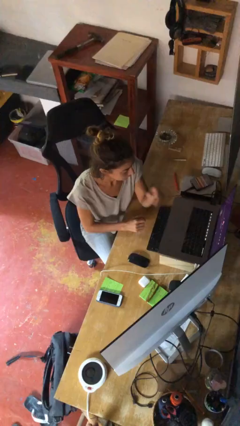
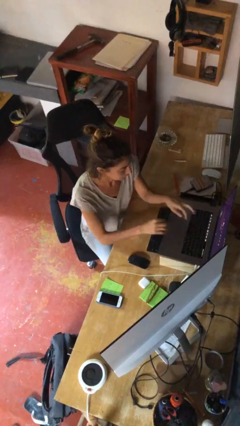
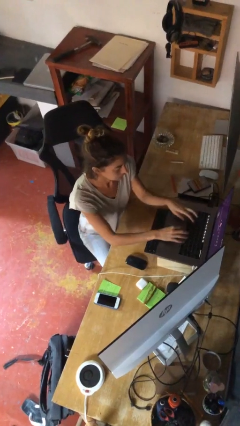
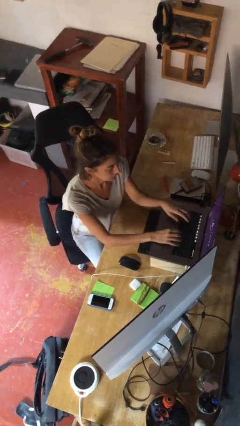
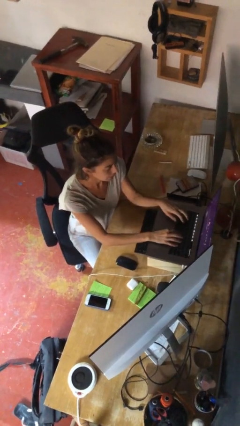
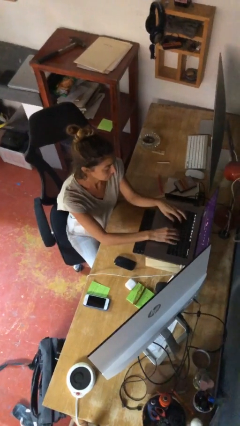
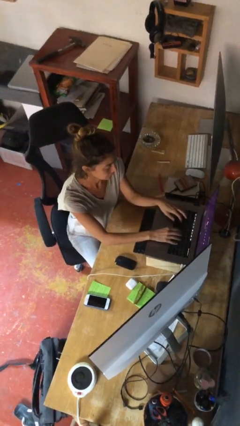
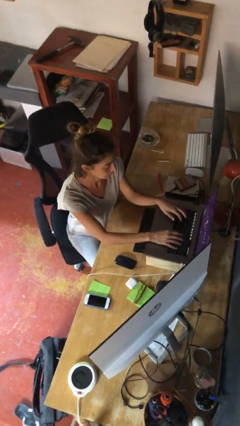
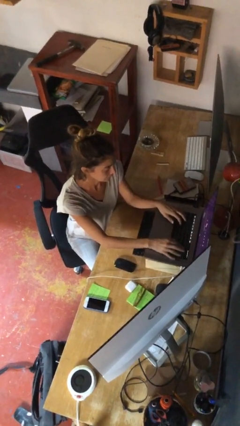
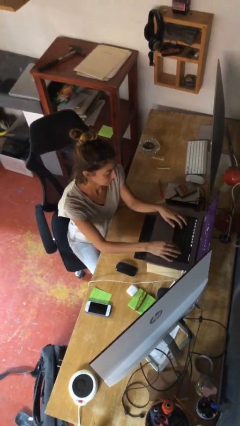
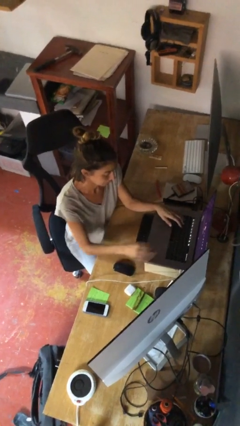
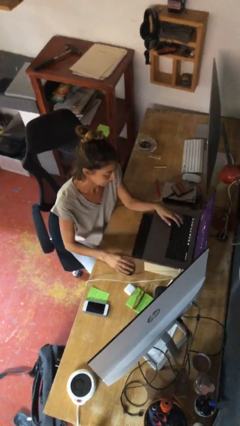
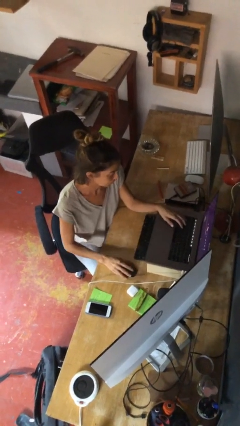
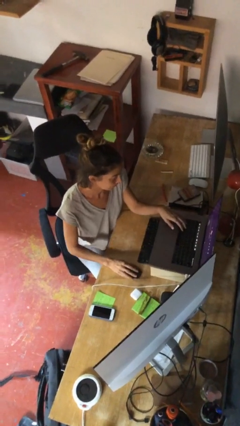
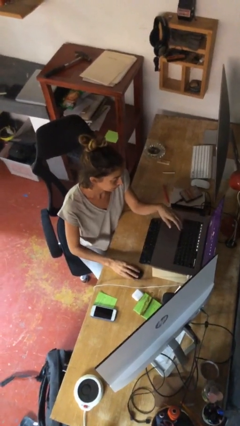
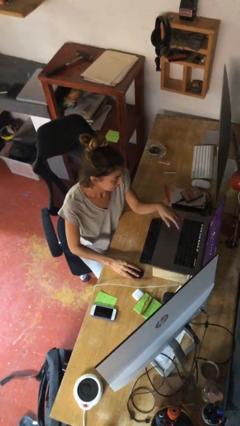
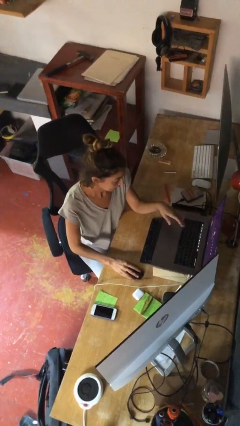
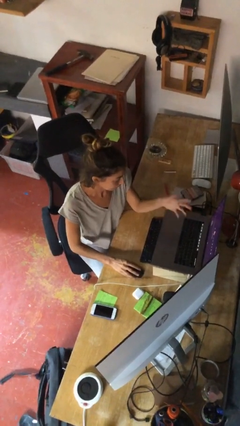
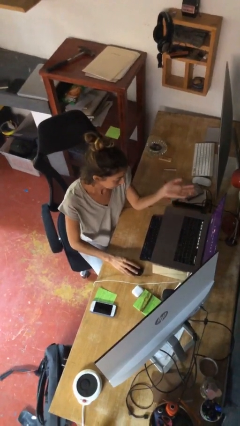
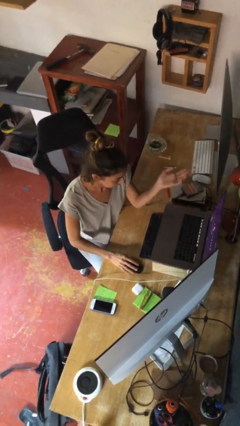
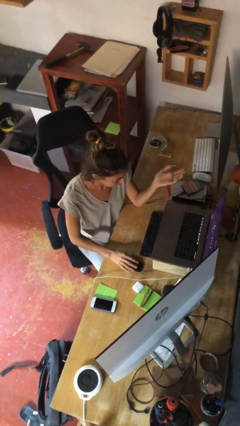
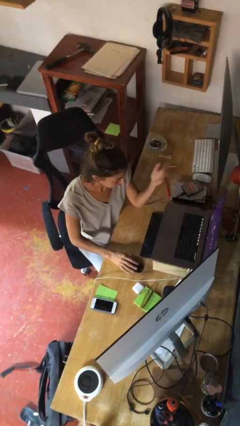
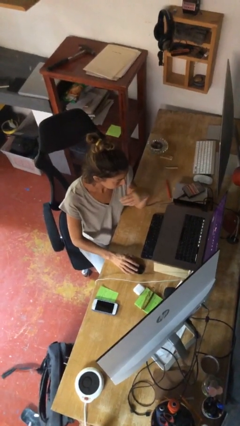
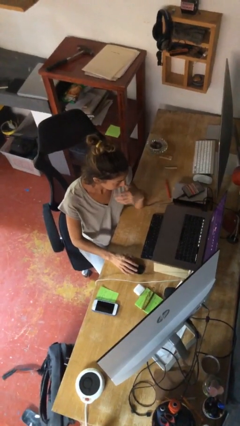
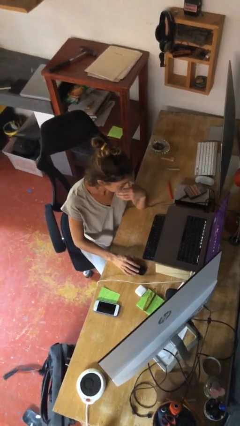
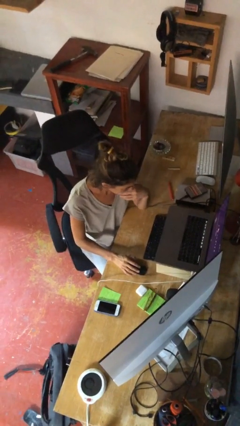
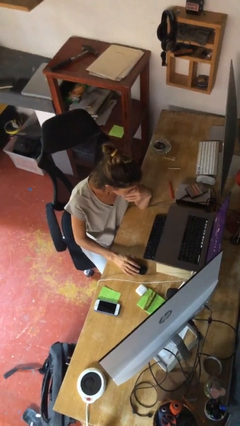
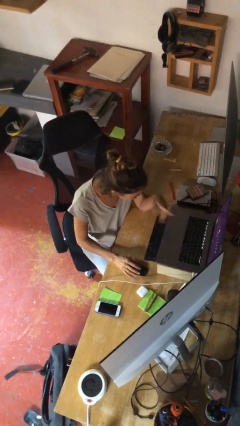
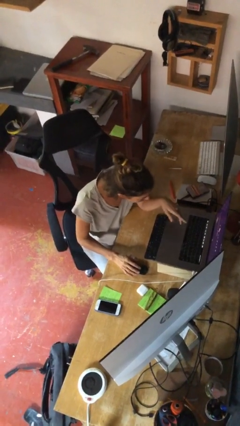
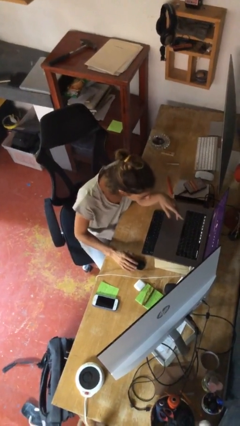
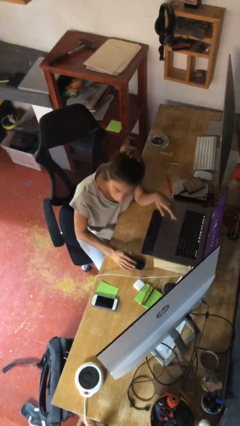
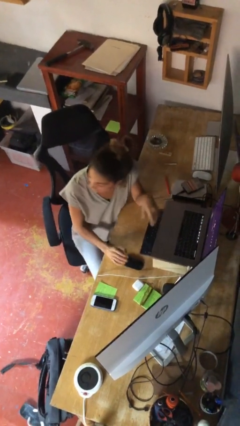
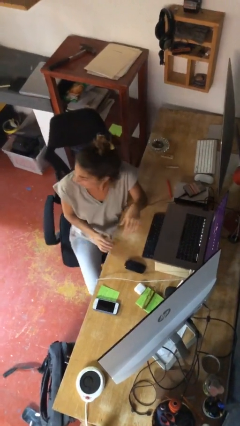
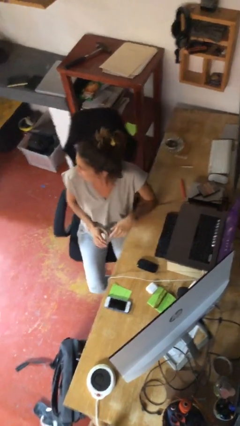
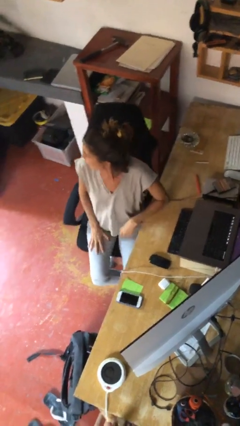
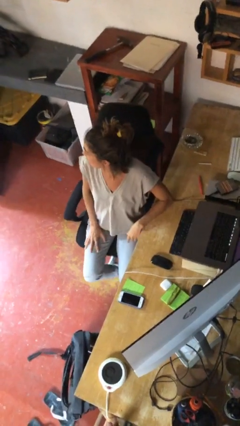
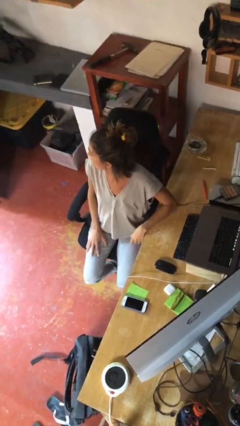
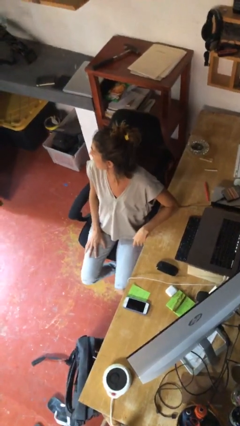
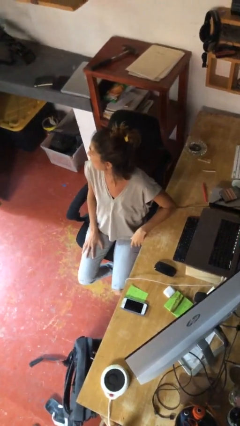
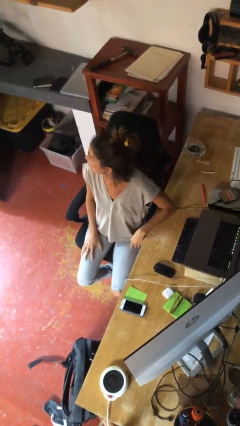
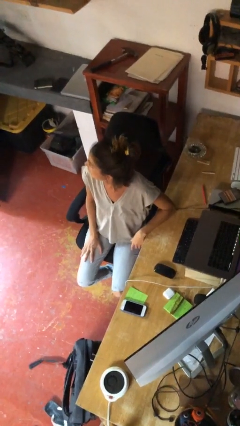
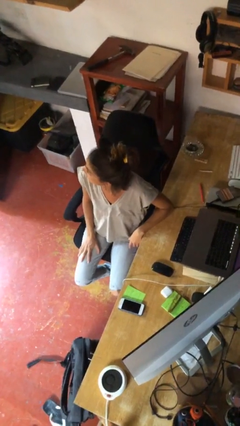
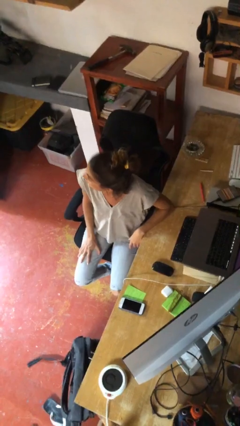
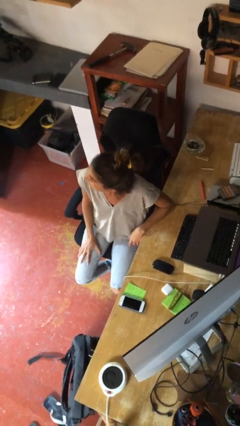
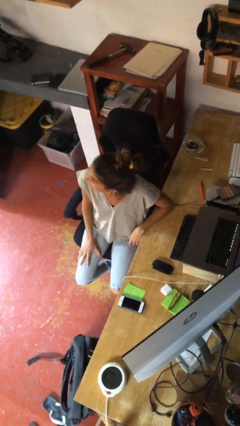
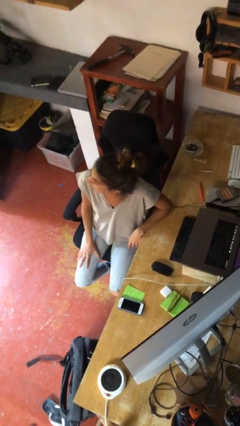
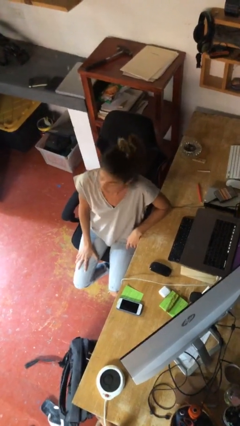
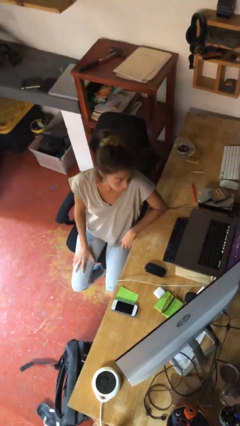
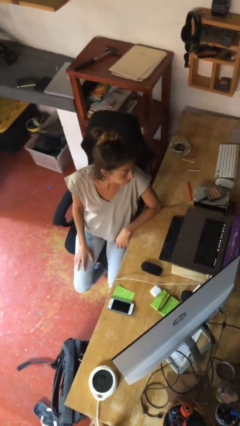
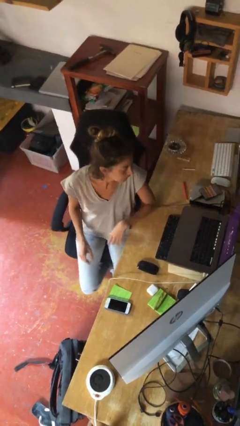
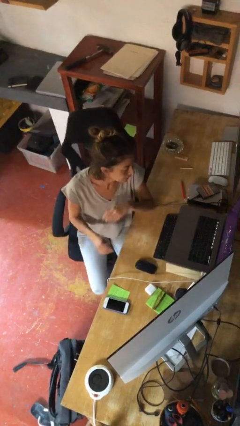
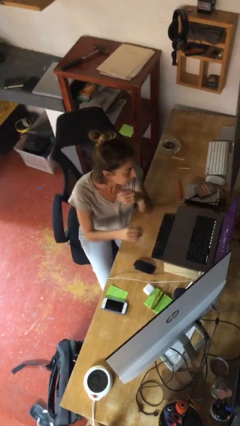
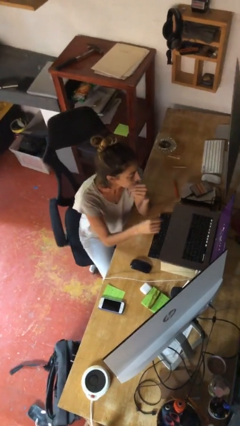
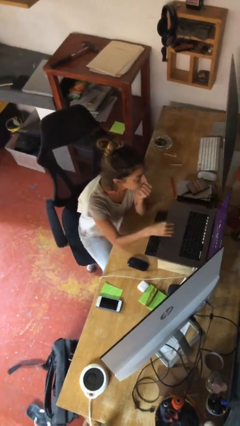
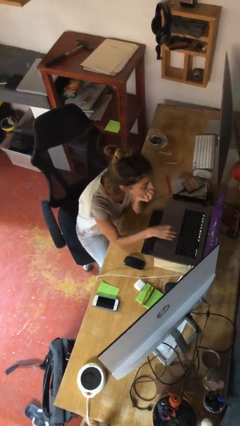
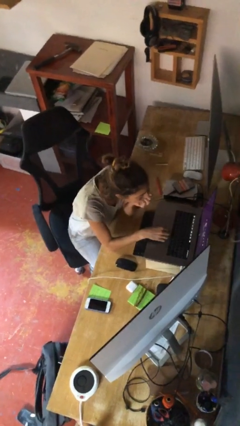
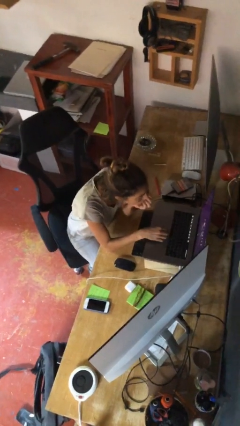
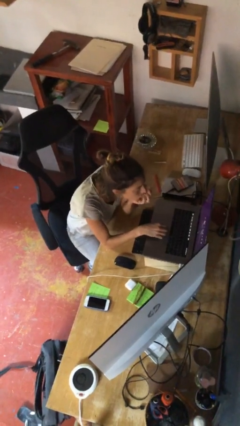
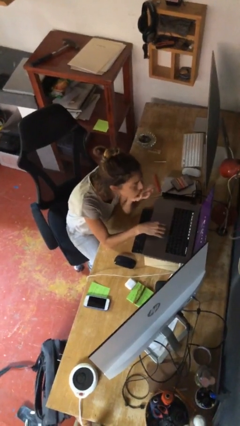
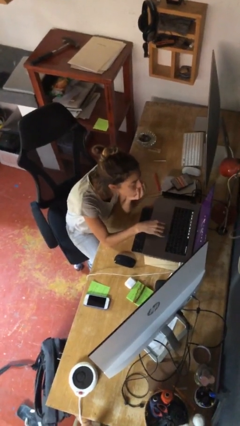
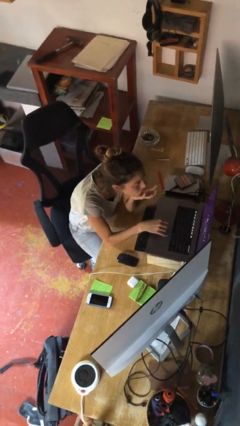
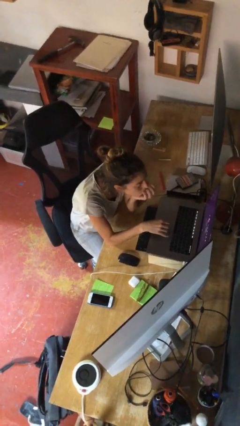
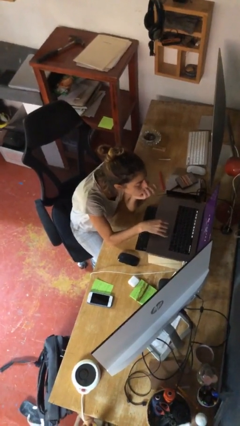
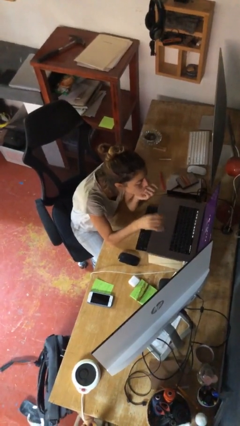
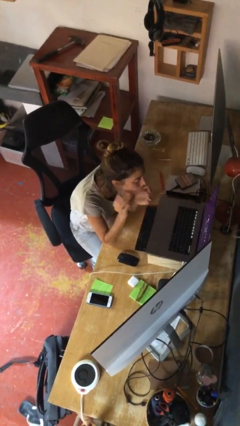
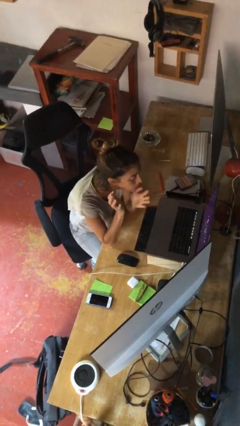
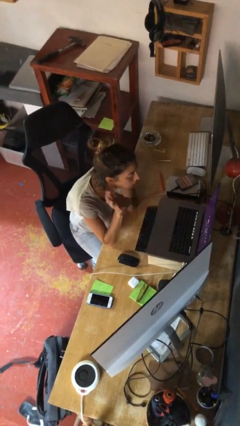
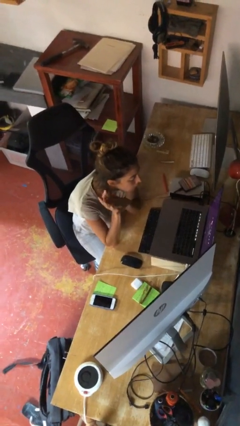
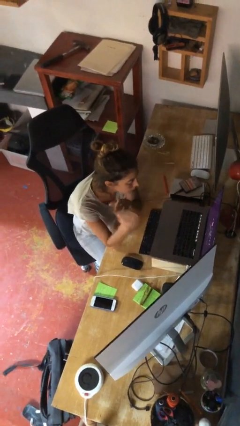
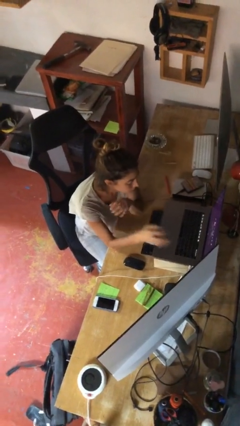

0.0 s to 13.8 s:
person interacts with laptop

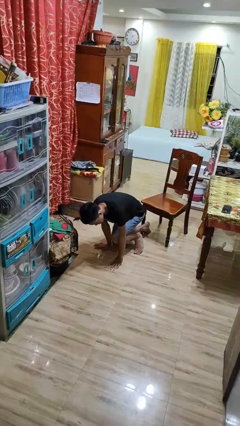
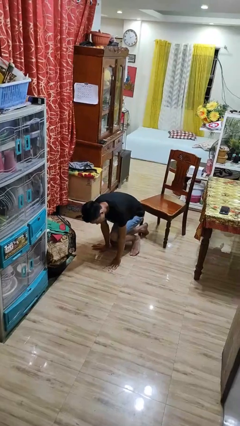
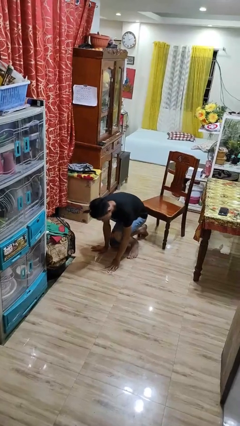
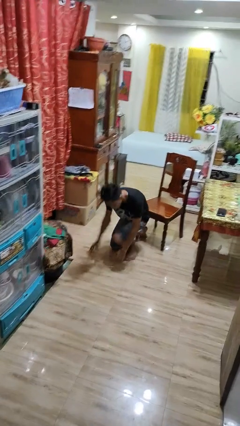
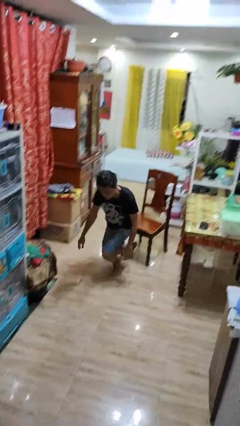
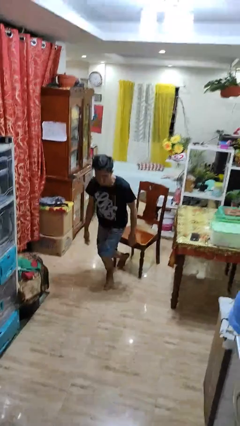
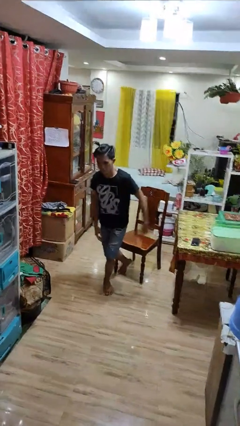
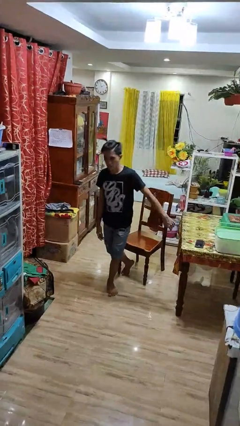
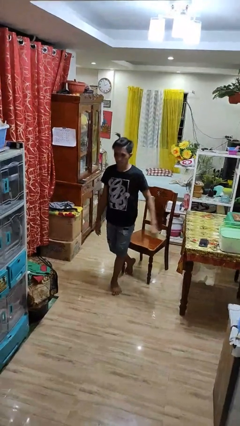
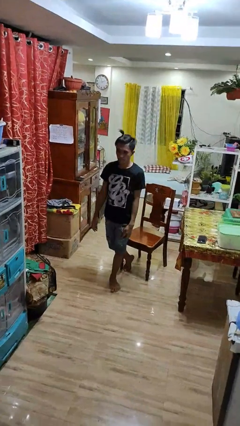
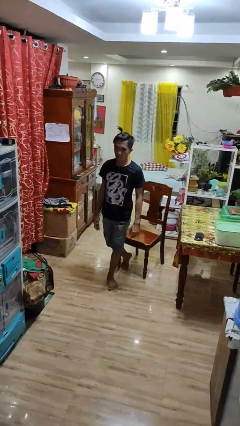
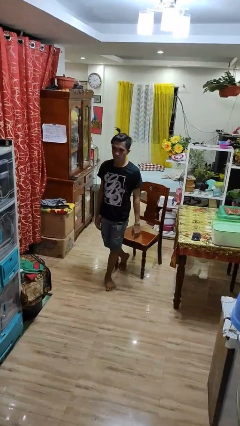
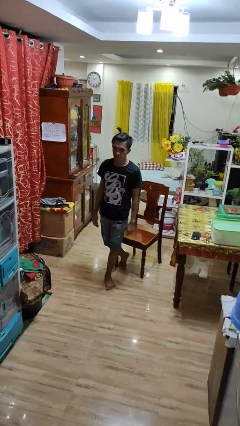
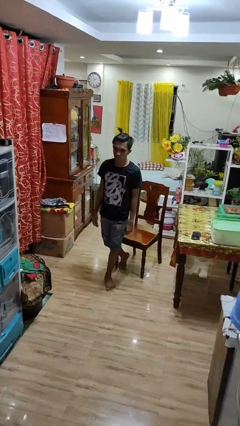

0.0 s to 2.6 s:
person stands up from floor

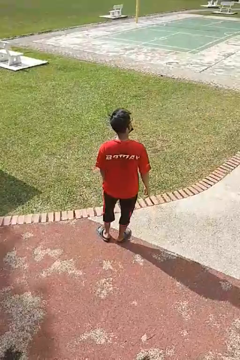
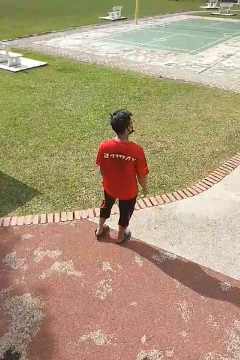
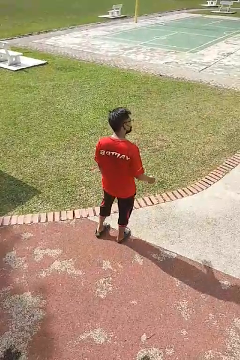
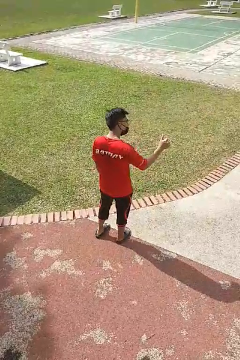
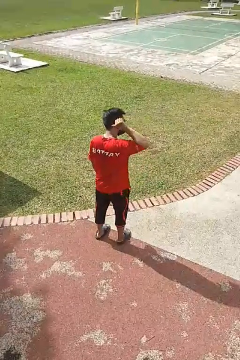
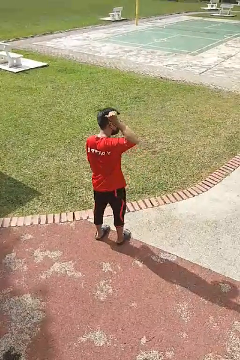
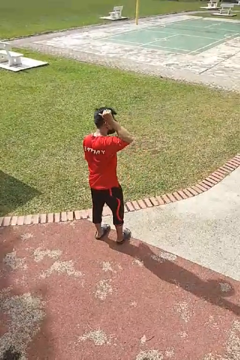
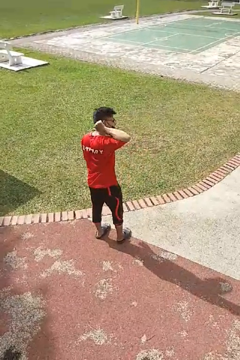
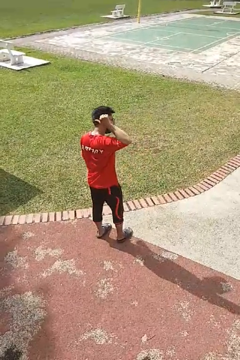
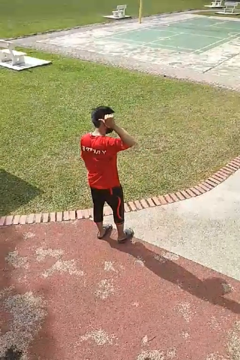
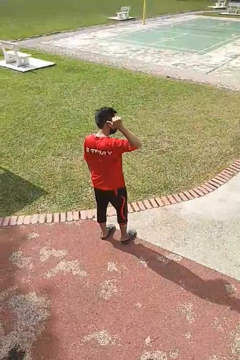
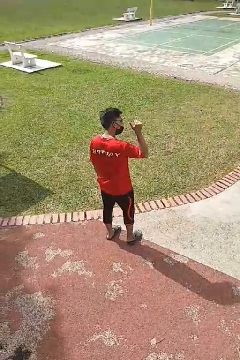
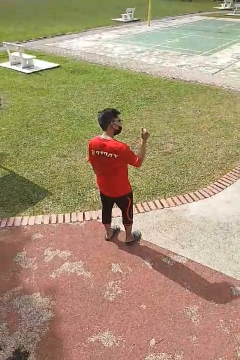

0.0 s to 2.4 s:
person gestures behind me
